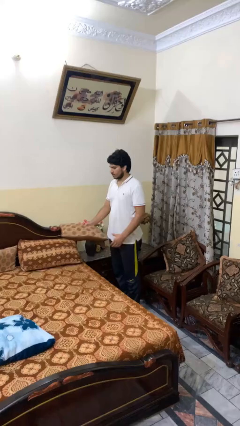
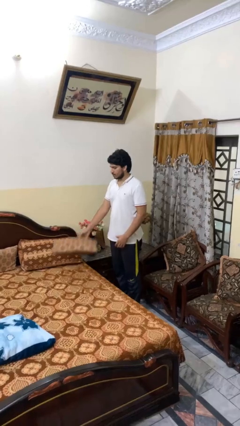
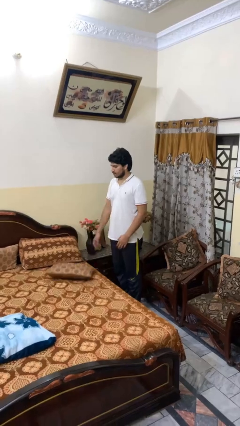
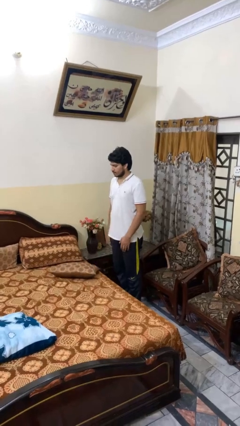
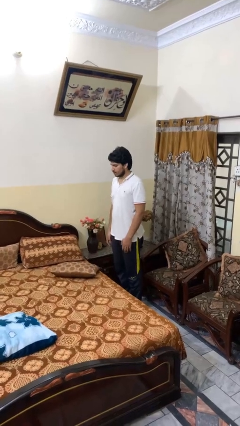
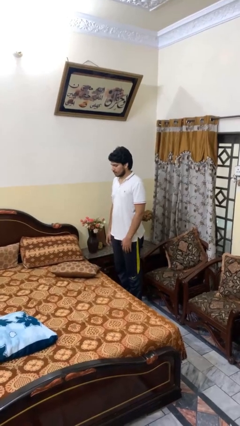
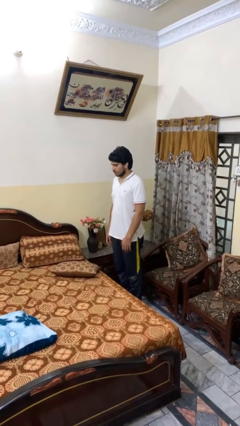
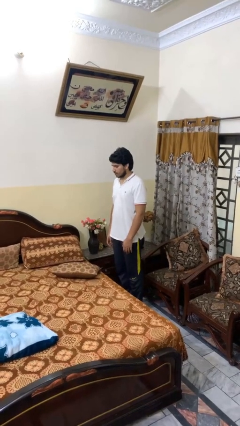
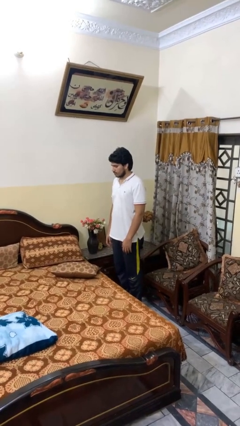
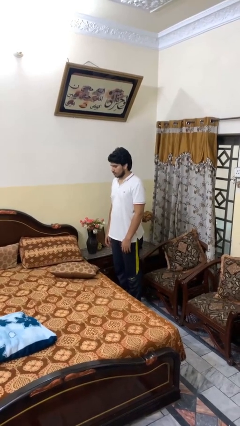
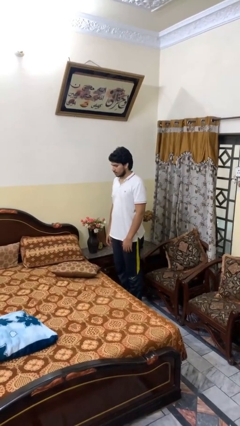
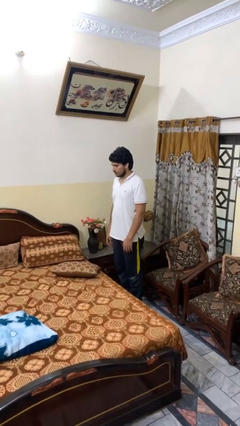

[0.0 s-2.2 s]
person puts down object on bed

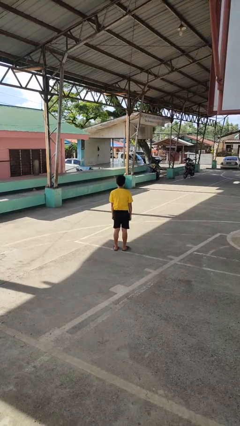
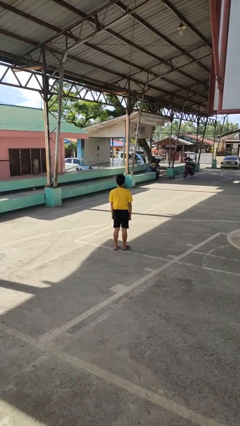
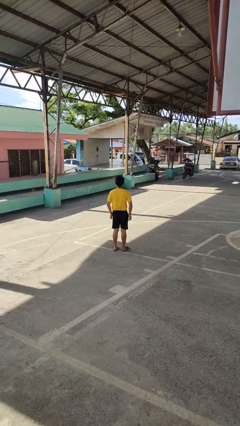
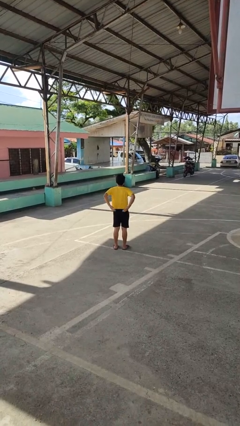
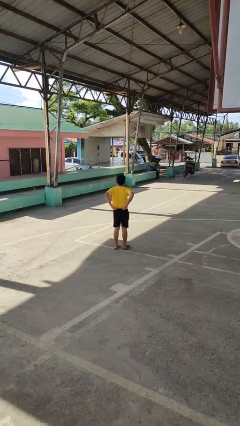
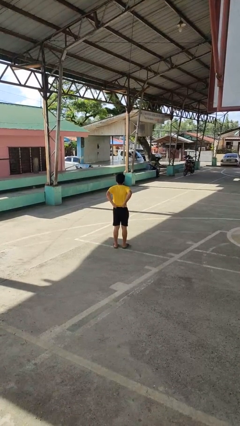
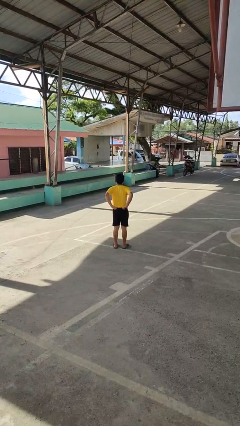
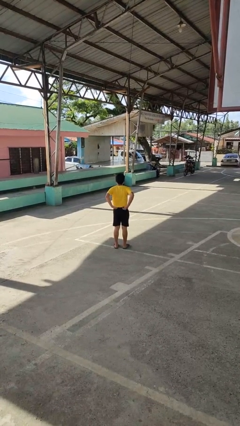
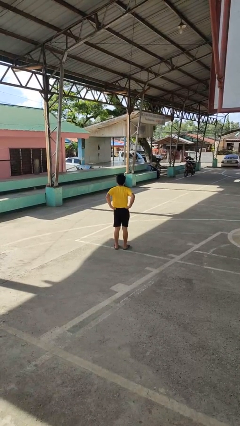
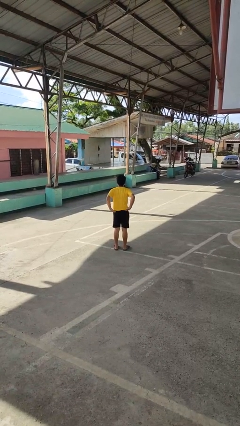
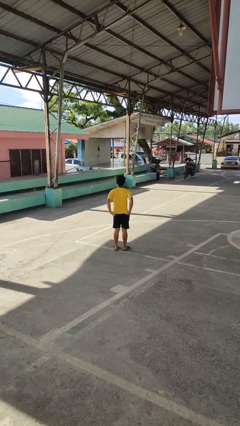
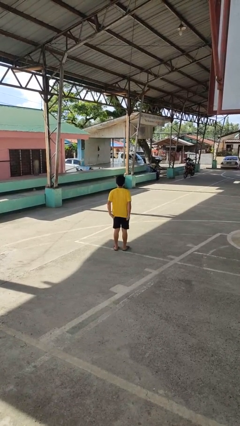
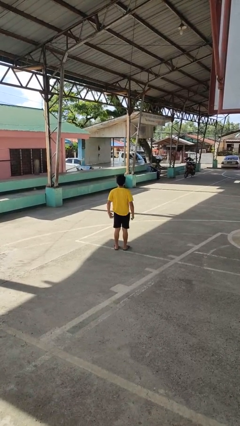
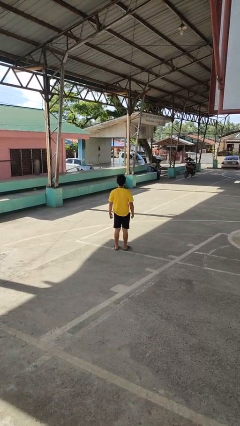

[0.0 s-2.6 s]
person untucks shirt

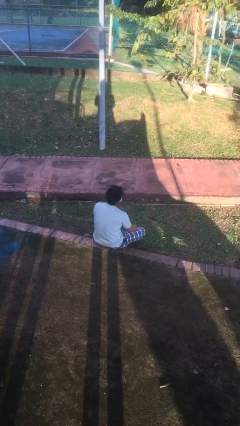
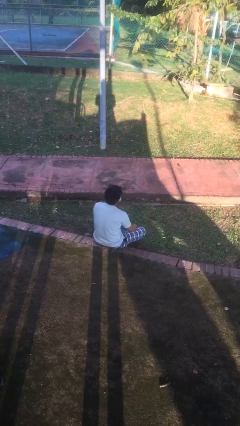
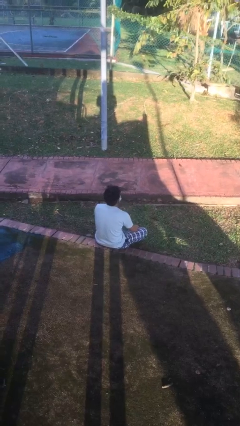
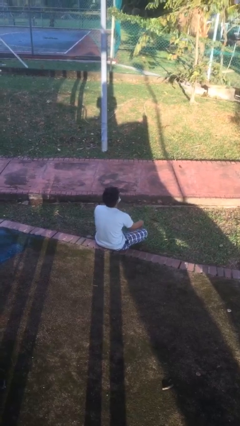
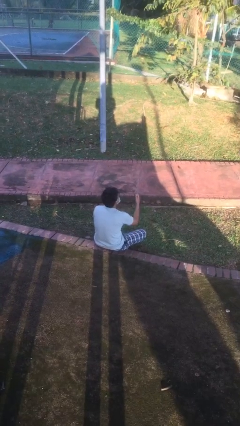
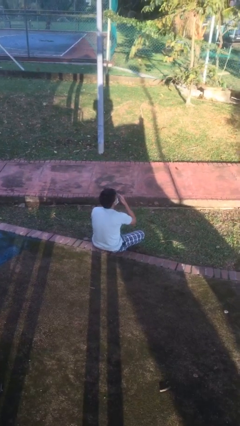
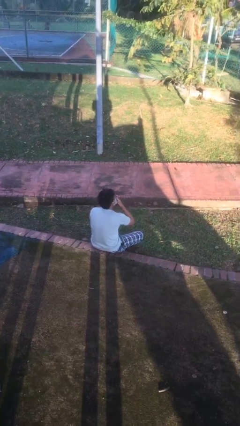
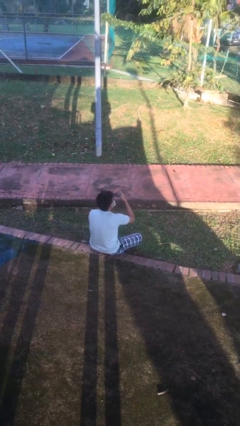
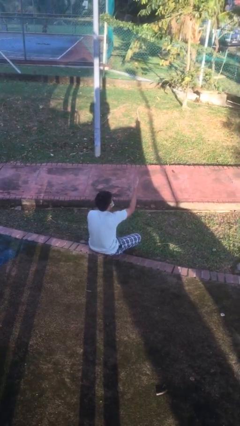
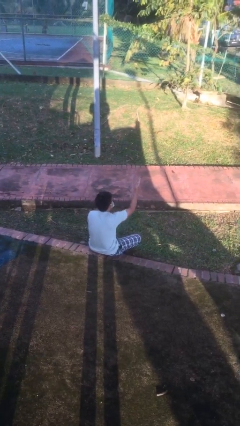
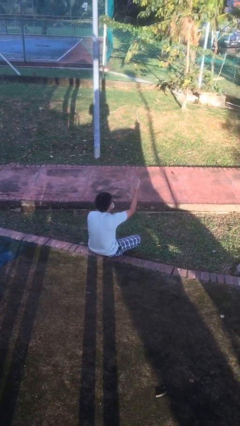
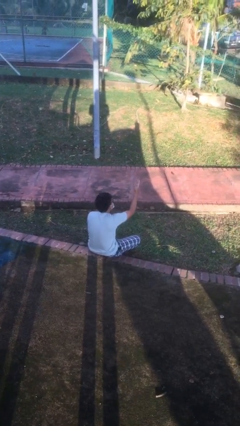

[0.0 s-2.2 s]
person gestures blow kiss

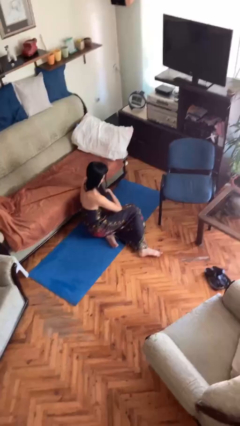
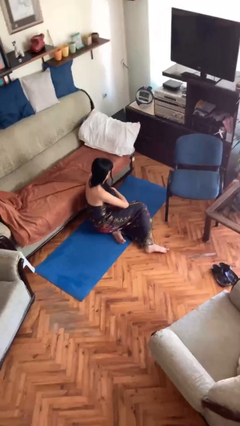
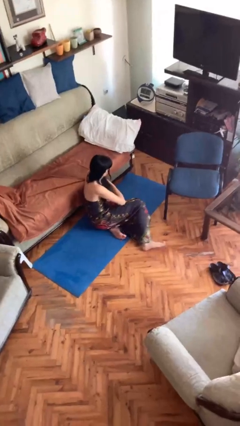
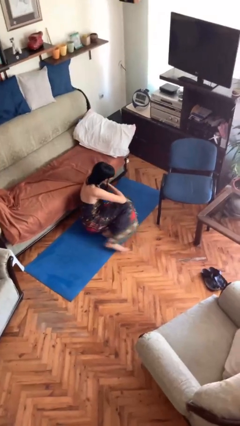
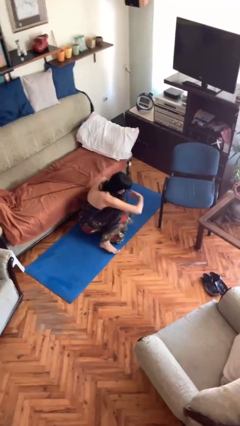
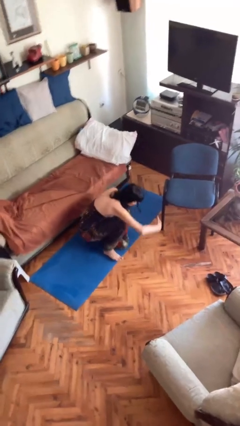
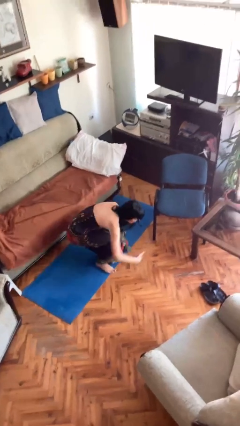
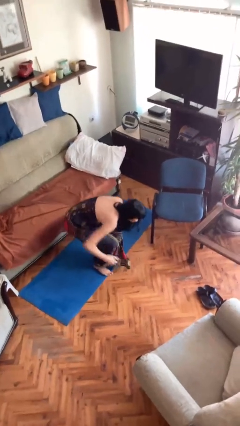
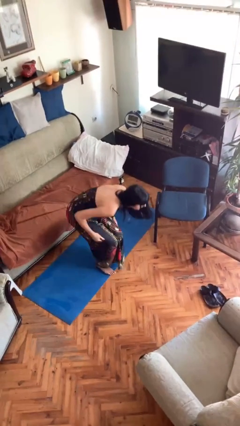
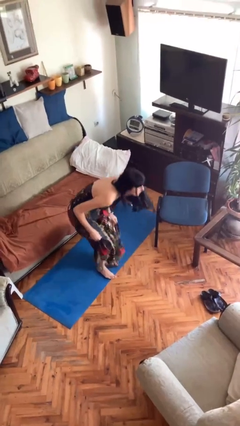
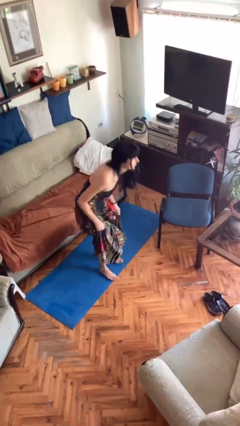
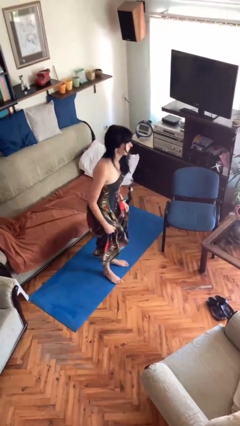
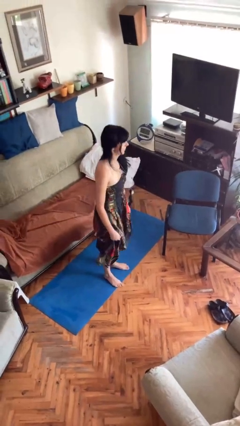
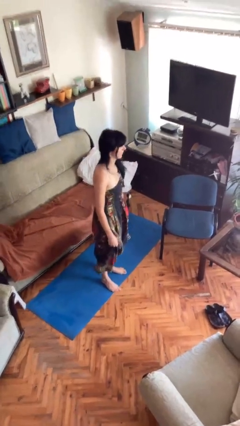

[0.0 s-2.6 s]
person stands up from floor

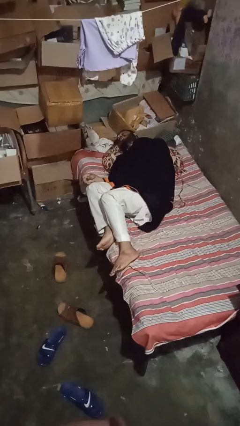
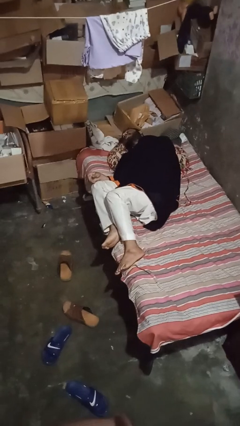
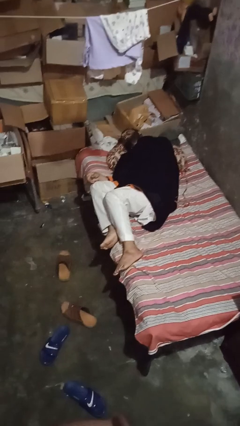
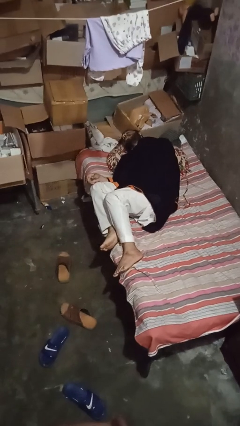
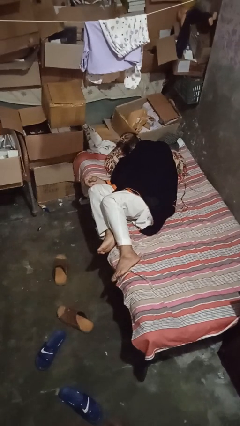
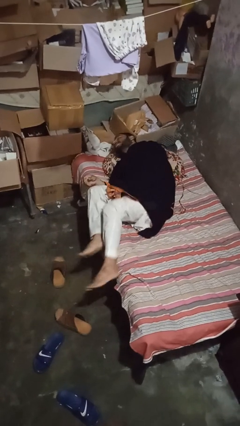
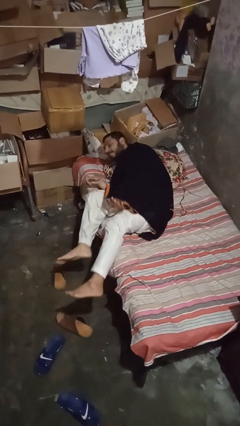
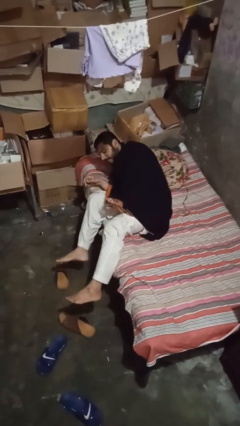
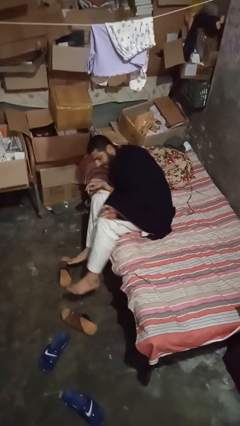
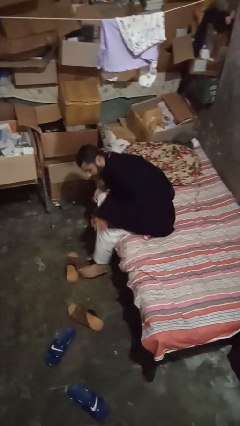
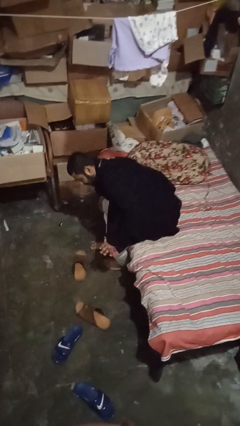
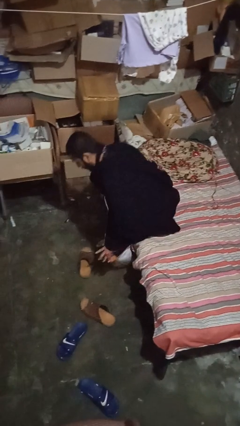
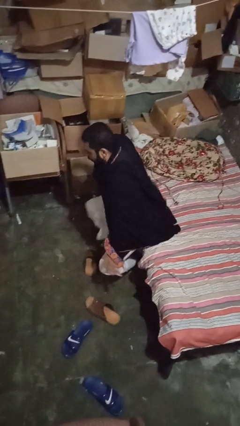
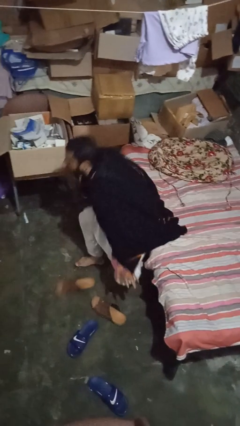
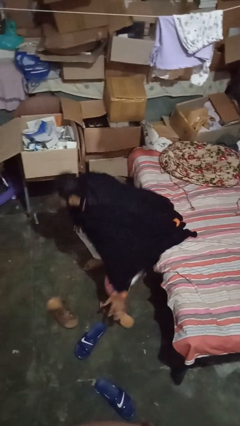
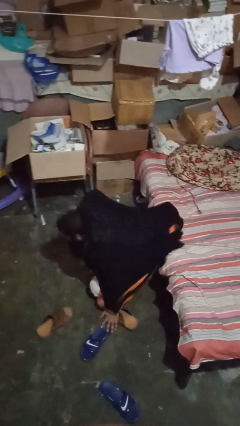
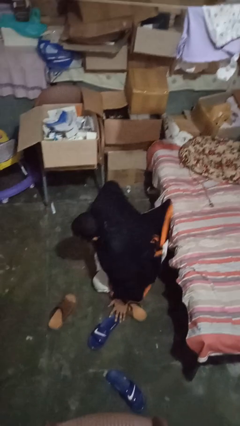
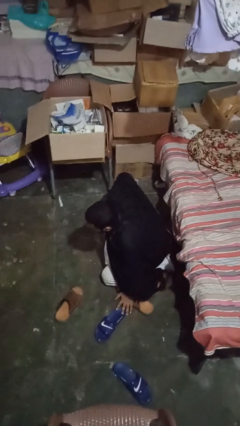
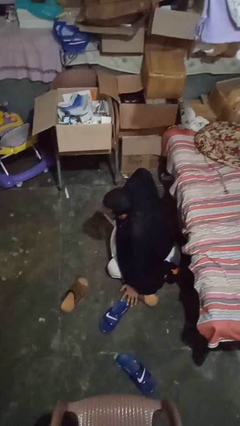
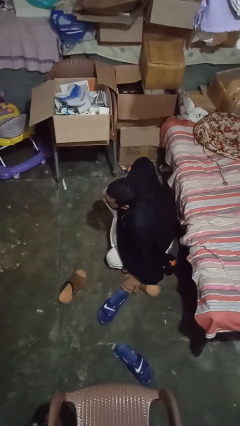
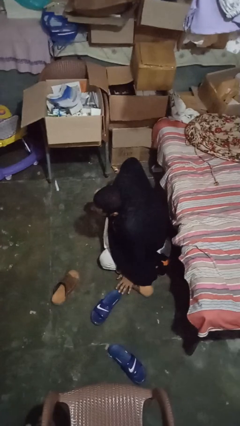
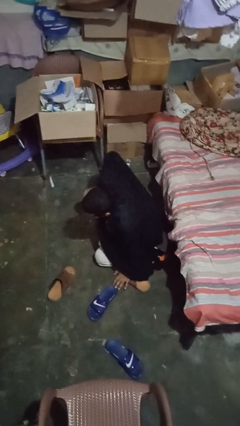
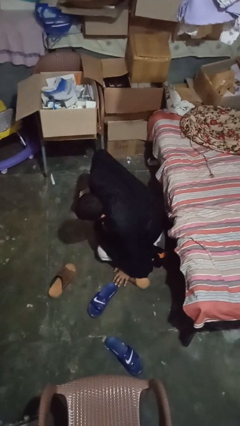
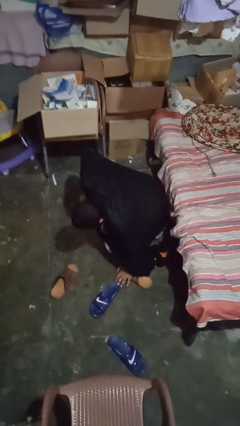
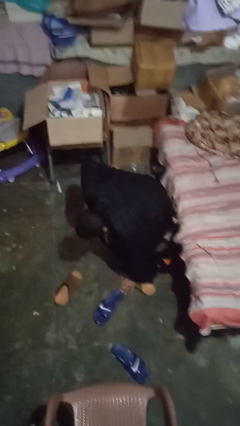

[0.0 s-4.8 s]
person falls from bed

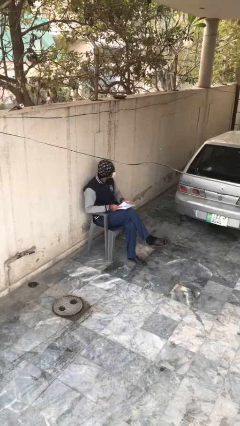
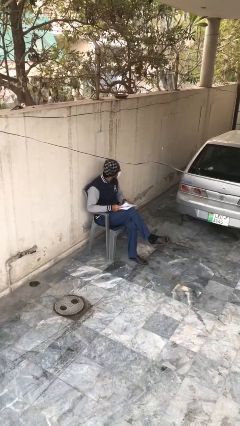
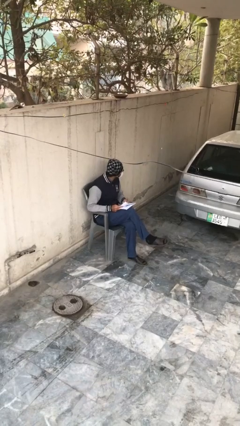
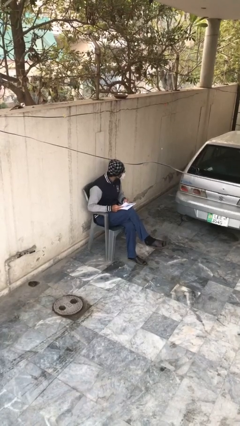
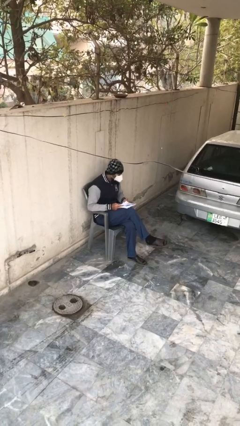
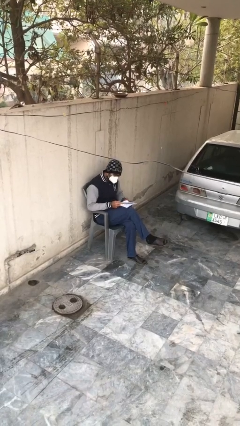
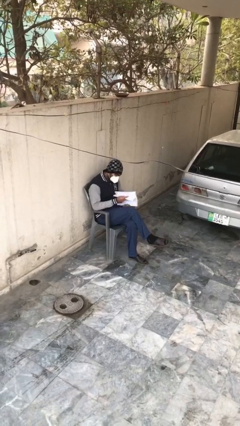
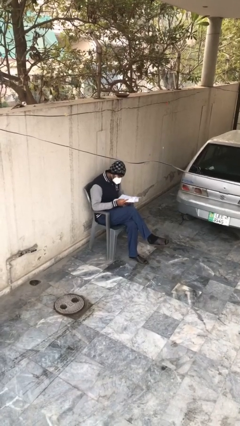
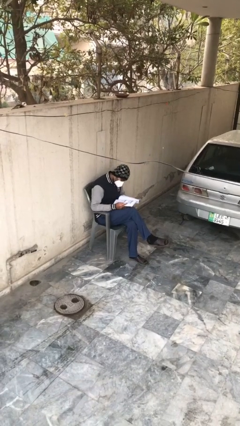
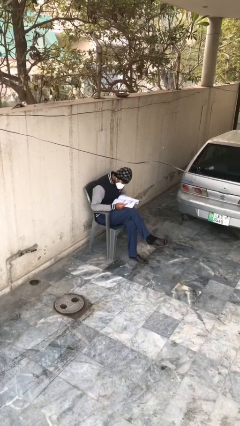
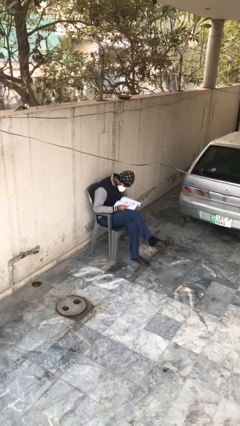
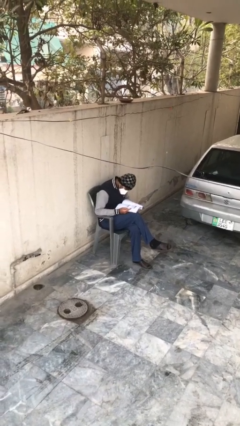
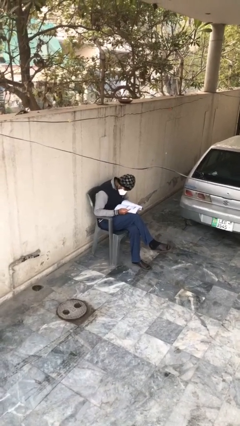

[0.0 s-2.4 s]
person reads document

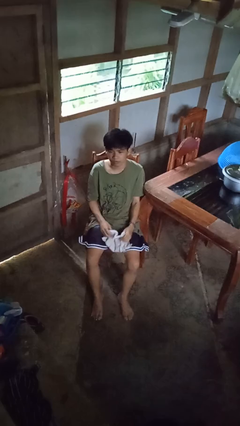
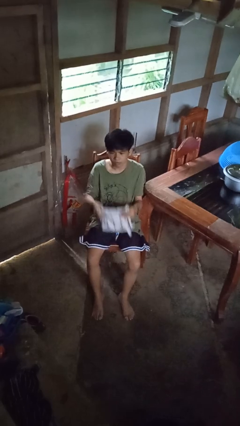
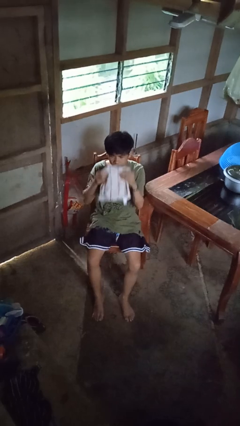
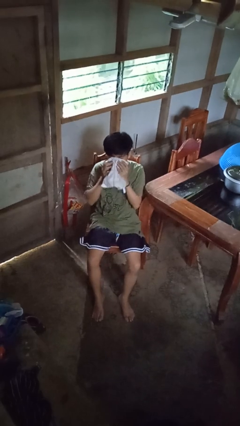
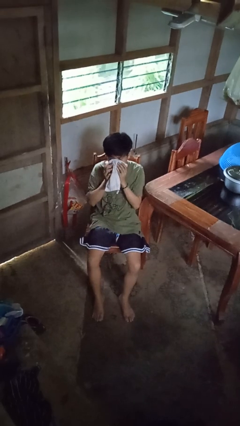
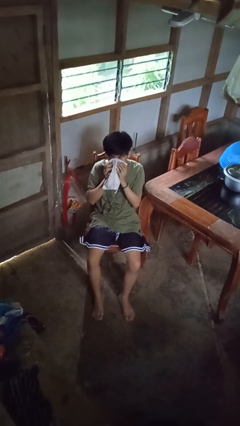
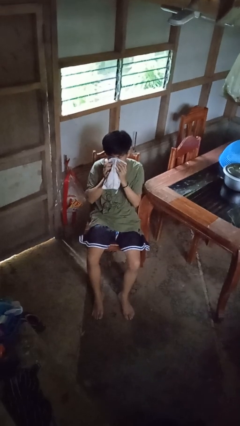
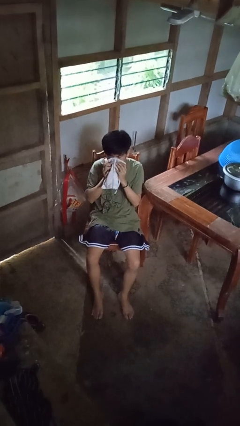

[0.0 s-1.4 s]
person blows nose
